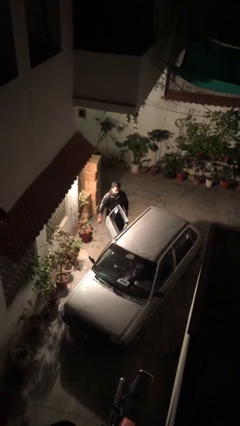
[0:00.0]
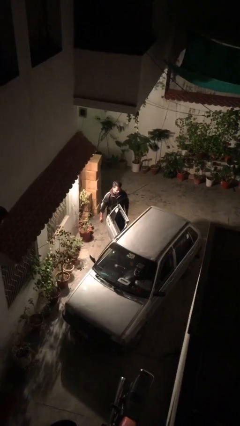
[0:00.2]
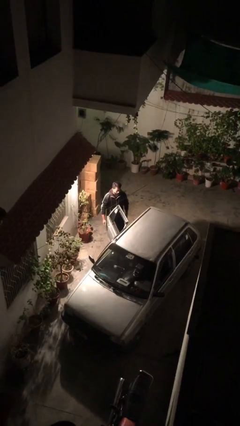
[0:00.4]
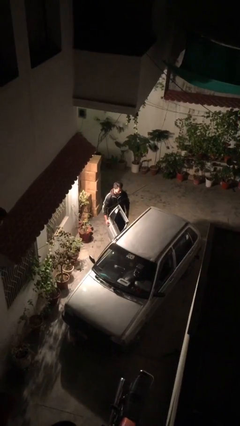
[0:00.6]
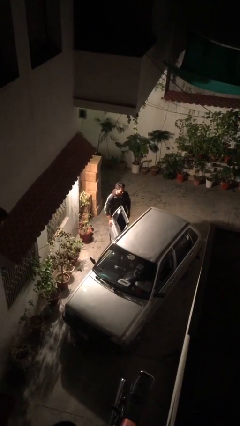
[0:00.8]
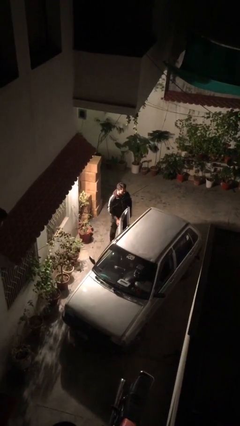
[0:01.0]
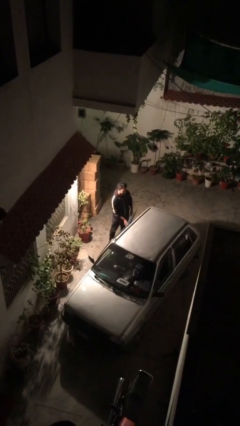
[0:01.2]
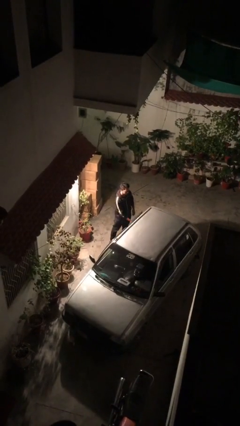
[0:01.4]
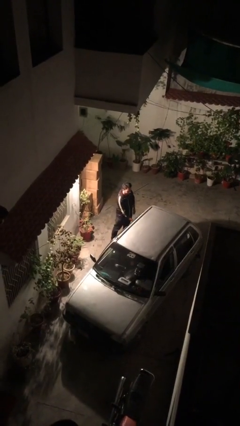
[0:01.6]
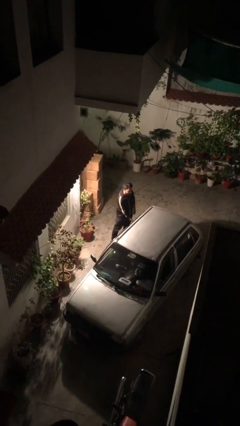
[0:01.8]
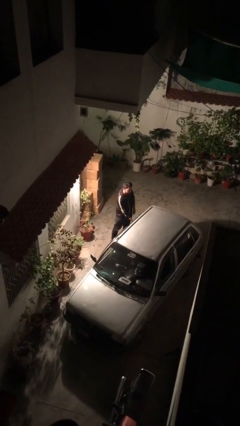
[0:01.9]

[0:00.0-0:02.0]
person closes car door

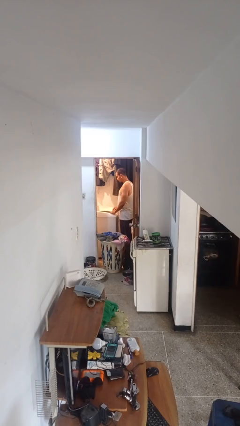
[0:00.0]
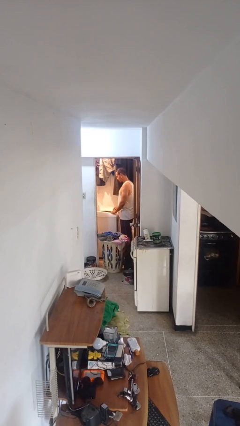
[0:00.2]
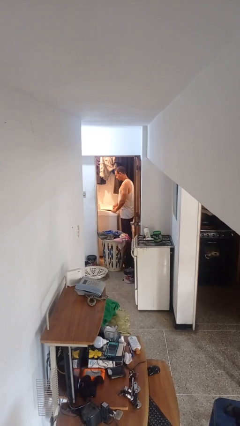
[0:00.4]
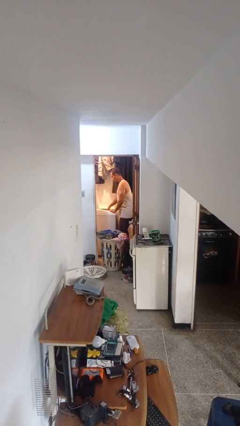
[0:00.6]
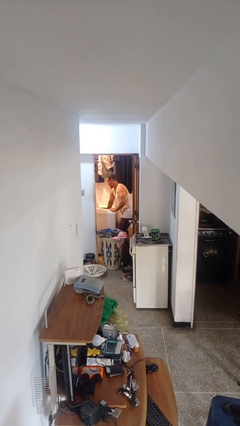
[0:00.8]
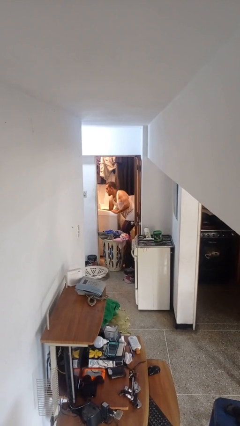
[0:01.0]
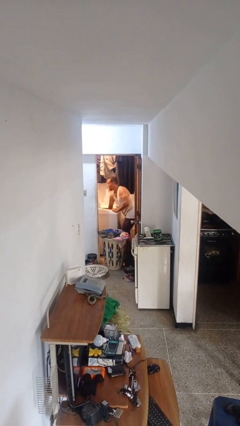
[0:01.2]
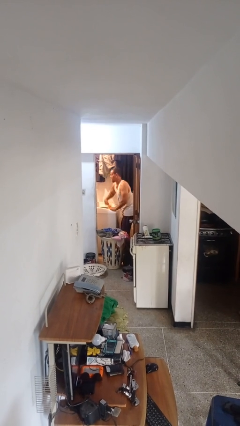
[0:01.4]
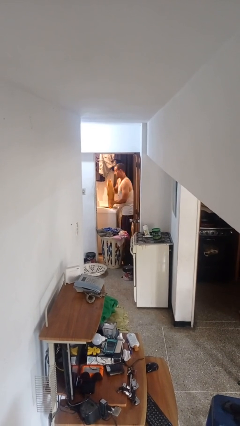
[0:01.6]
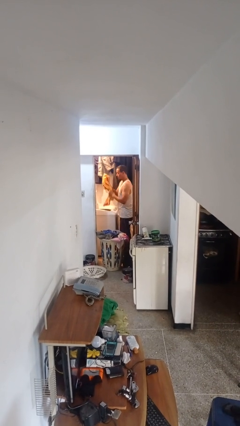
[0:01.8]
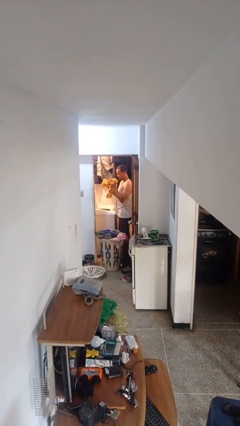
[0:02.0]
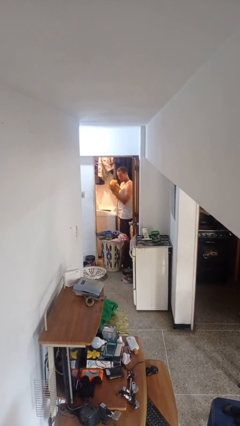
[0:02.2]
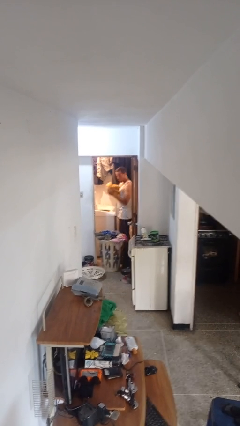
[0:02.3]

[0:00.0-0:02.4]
person unloads clotheswasher

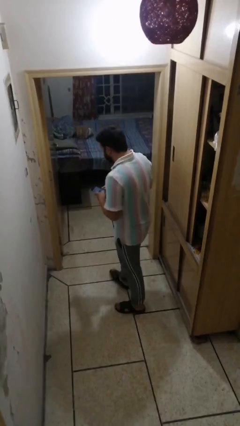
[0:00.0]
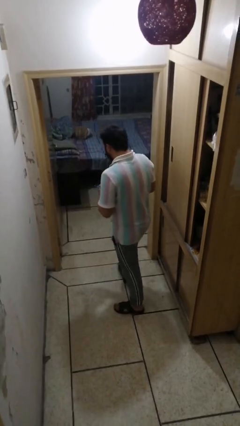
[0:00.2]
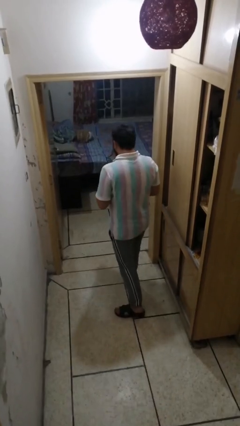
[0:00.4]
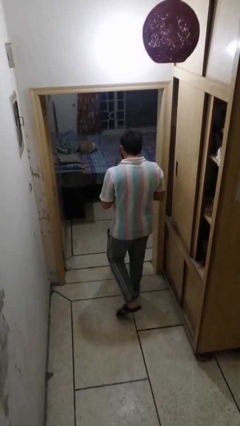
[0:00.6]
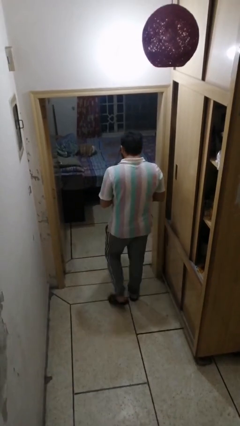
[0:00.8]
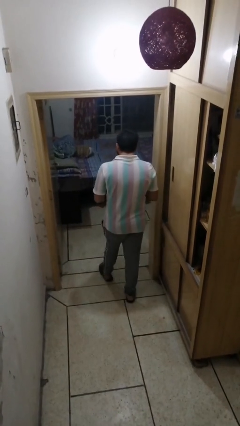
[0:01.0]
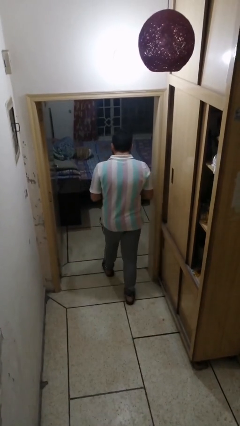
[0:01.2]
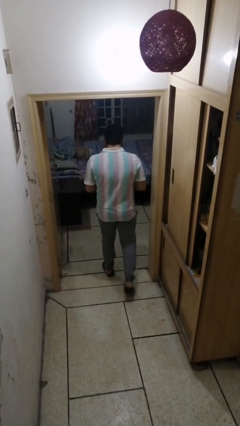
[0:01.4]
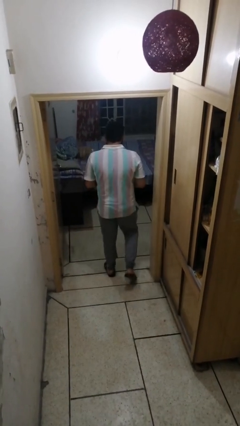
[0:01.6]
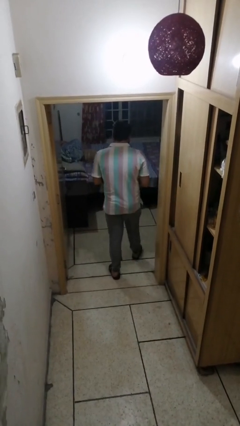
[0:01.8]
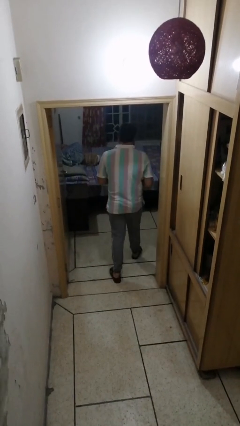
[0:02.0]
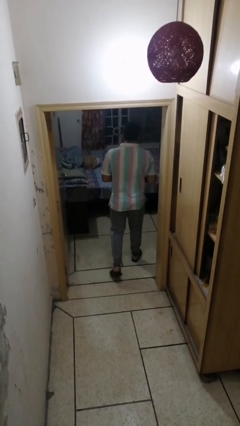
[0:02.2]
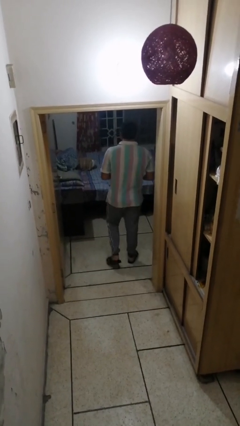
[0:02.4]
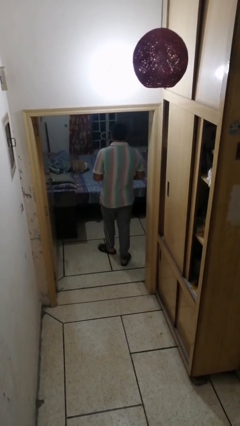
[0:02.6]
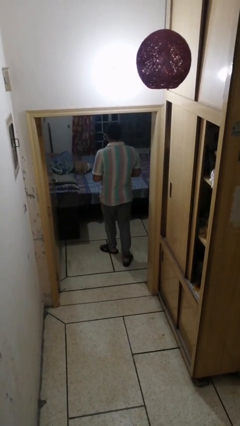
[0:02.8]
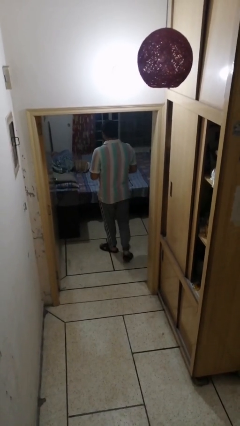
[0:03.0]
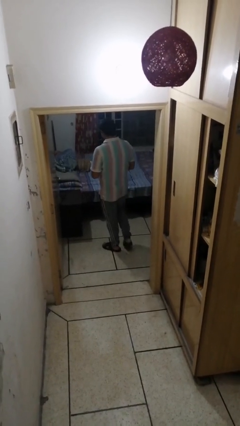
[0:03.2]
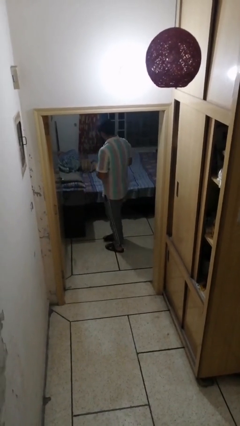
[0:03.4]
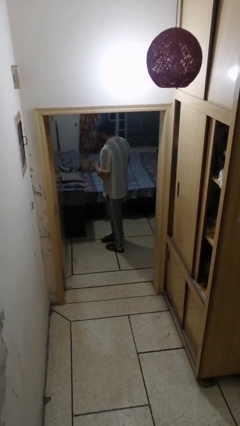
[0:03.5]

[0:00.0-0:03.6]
person exits scene through structure

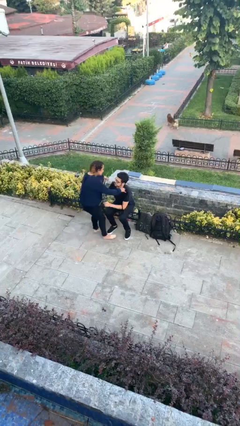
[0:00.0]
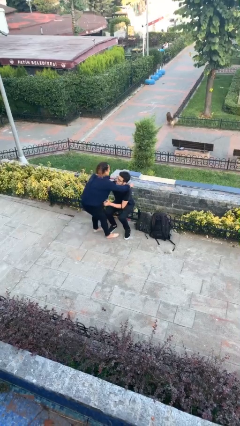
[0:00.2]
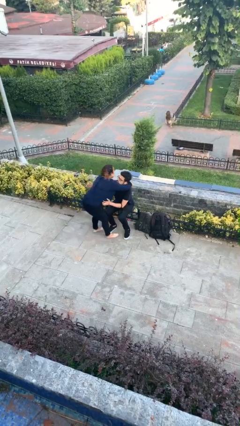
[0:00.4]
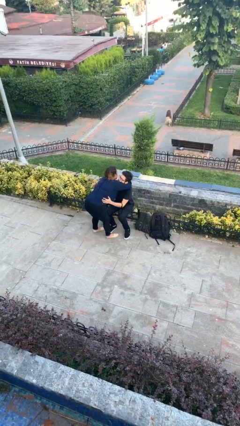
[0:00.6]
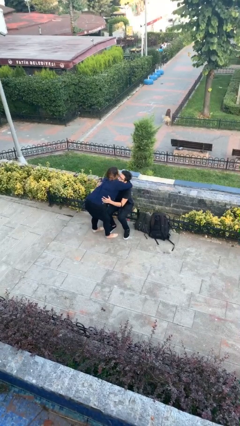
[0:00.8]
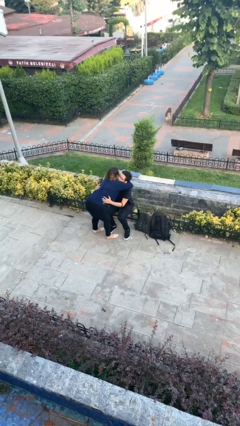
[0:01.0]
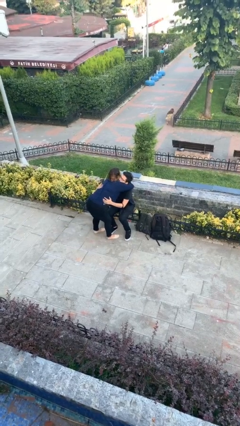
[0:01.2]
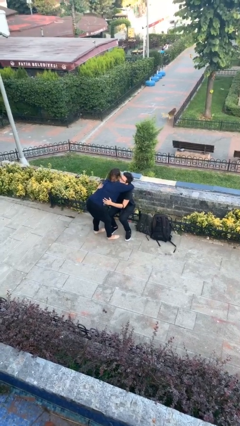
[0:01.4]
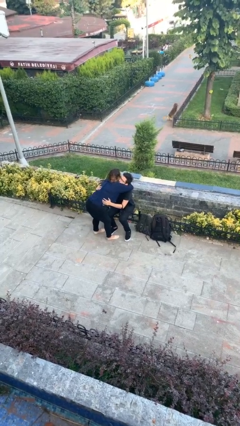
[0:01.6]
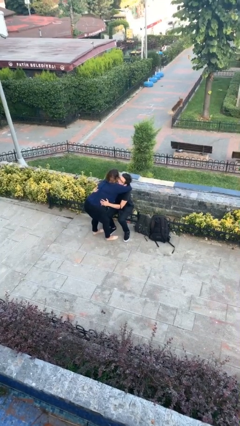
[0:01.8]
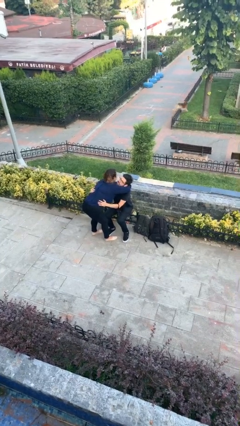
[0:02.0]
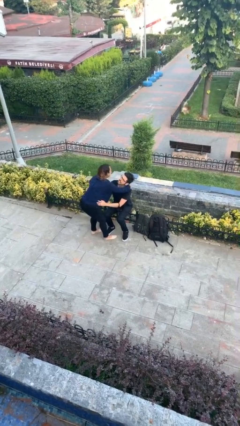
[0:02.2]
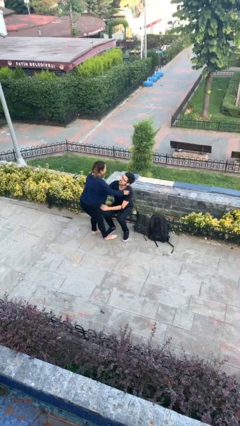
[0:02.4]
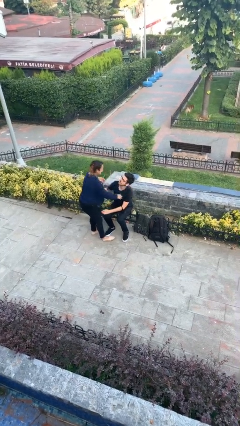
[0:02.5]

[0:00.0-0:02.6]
person embraces person

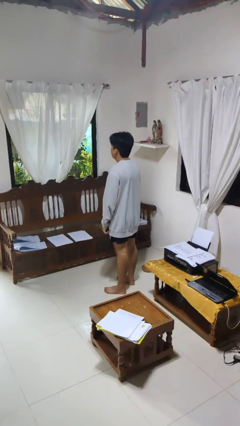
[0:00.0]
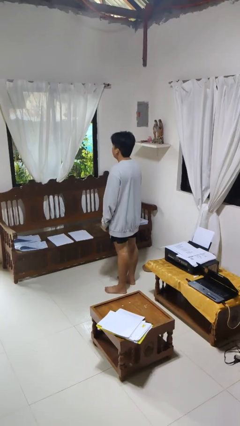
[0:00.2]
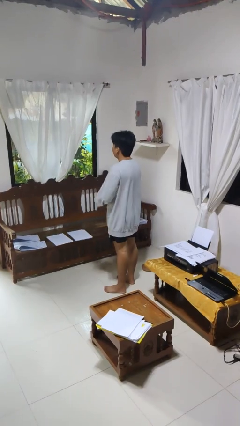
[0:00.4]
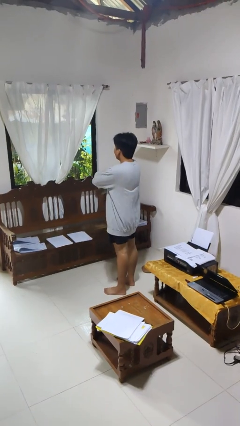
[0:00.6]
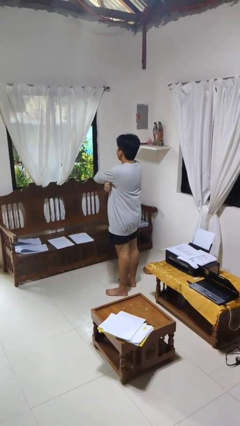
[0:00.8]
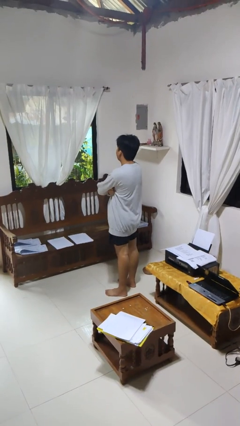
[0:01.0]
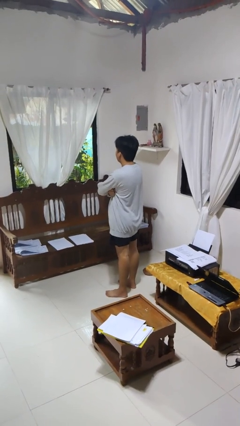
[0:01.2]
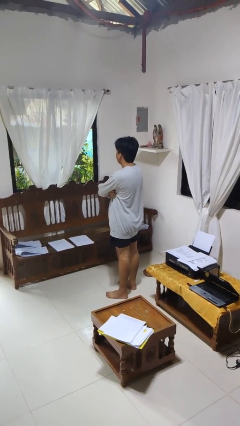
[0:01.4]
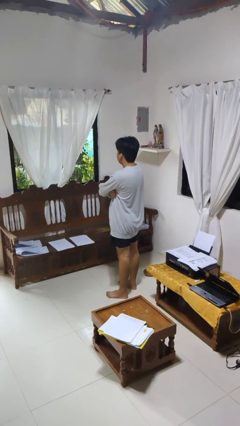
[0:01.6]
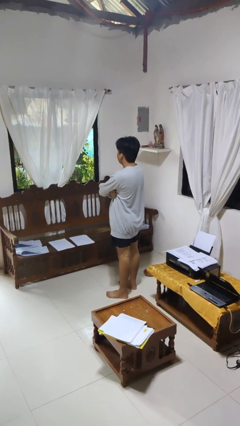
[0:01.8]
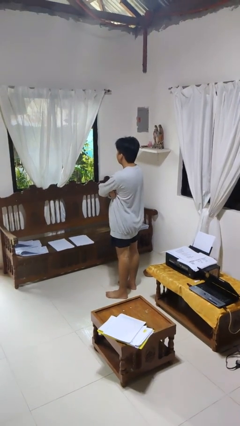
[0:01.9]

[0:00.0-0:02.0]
person gestures arms x

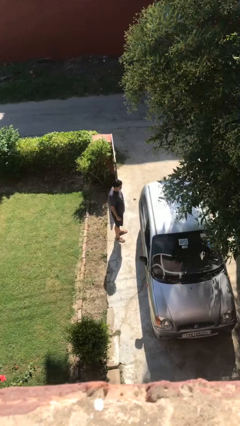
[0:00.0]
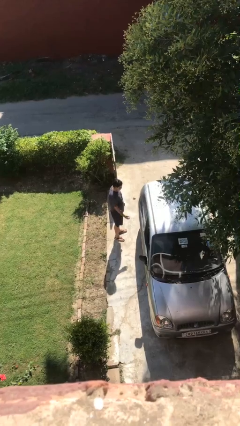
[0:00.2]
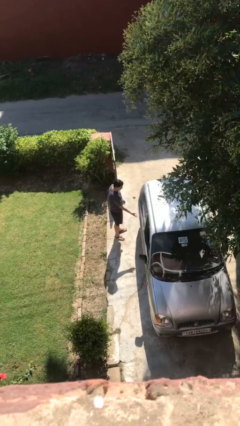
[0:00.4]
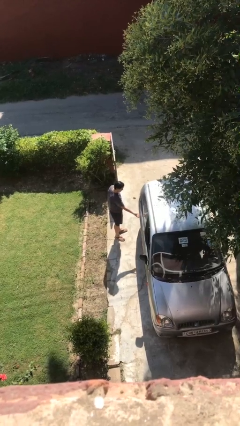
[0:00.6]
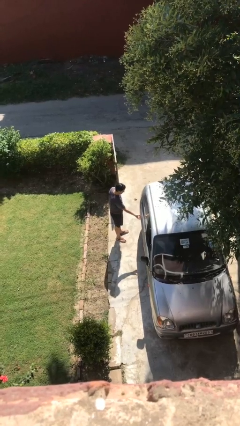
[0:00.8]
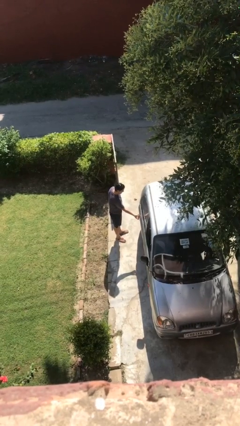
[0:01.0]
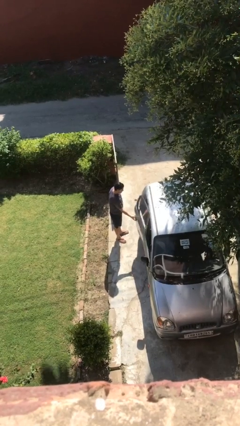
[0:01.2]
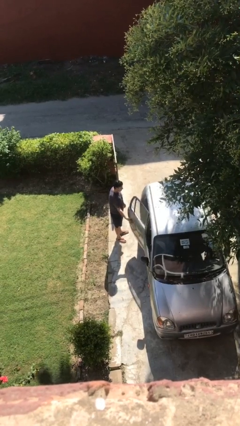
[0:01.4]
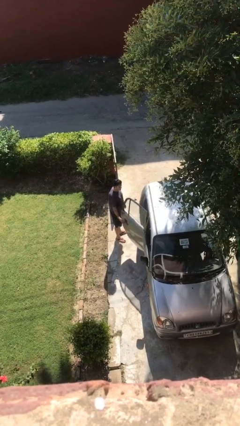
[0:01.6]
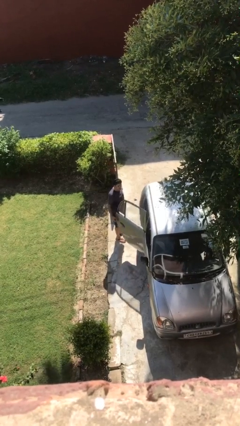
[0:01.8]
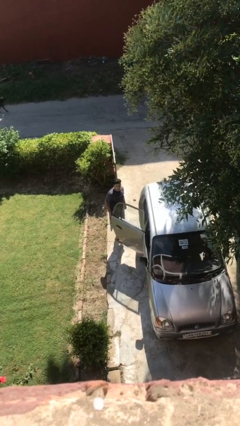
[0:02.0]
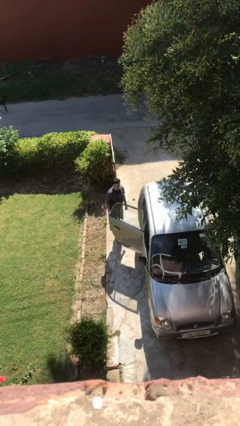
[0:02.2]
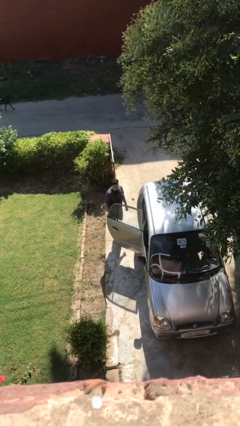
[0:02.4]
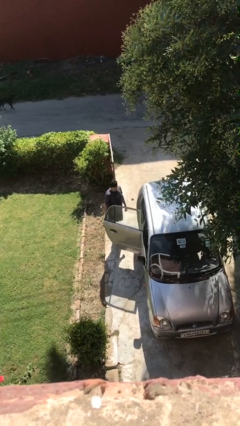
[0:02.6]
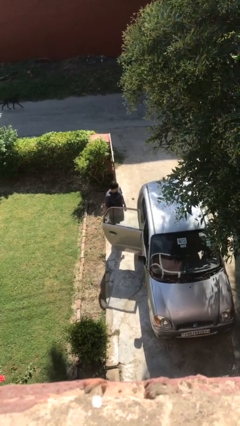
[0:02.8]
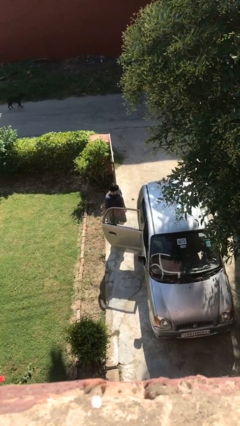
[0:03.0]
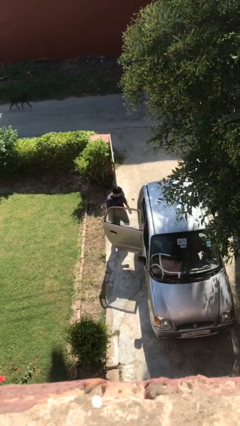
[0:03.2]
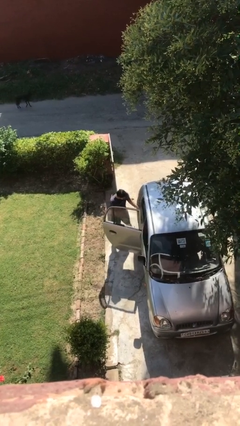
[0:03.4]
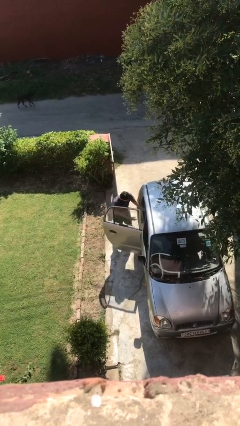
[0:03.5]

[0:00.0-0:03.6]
person opens car door

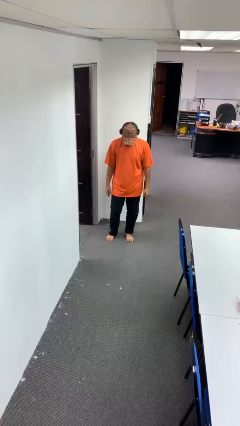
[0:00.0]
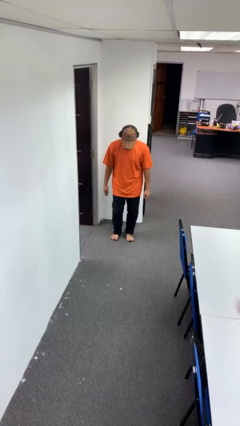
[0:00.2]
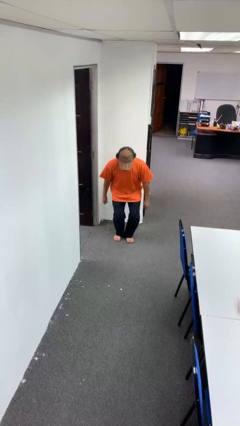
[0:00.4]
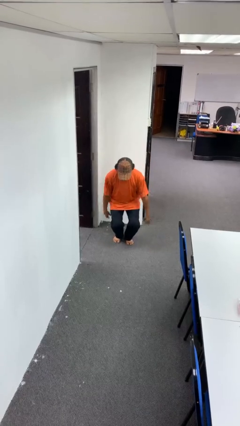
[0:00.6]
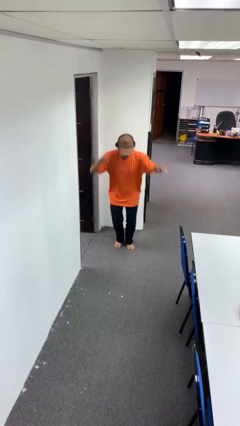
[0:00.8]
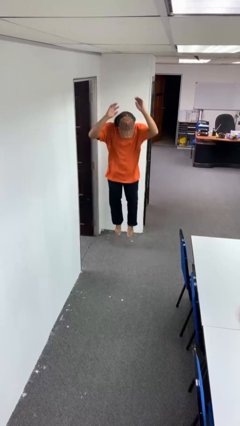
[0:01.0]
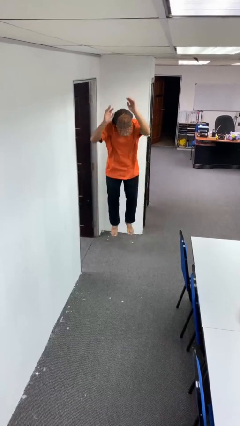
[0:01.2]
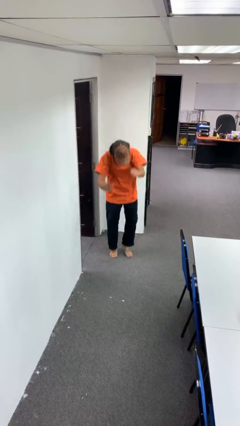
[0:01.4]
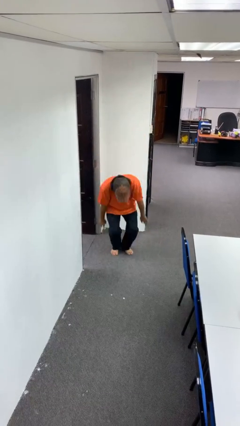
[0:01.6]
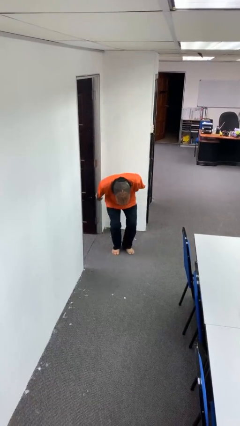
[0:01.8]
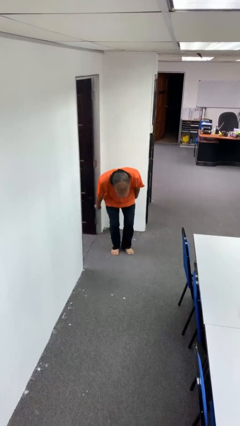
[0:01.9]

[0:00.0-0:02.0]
person jumps
